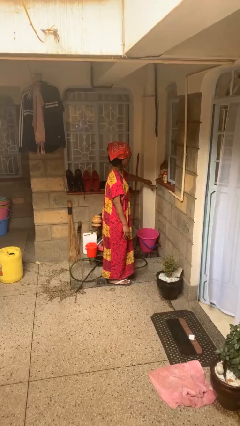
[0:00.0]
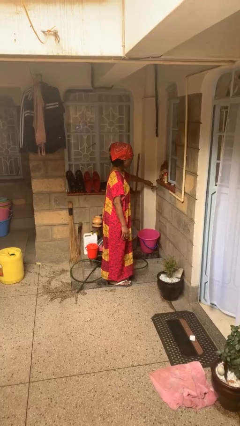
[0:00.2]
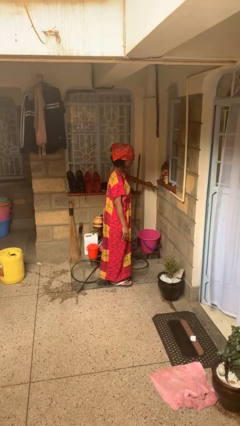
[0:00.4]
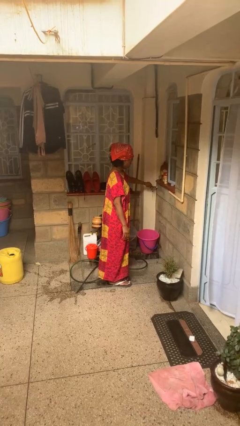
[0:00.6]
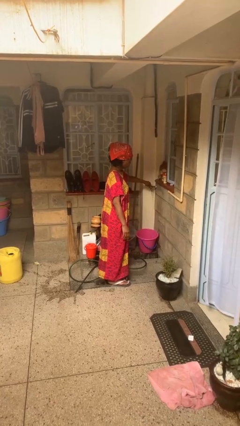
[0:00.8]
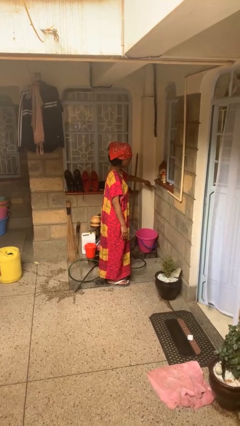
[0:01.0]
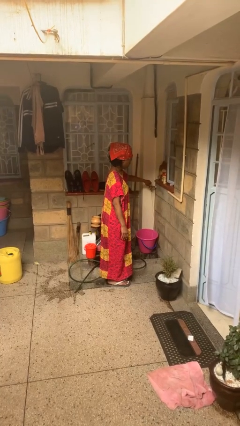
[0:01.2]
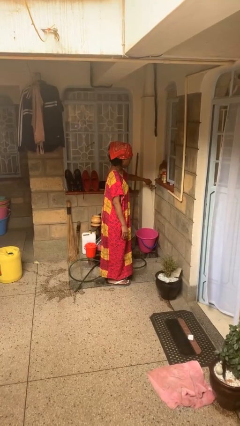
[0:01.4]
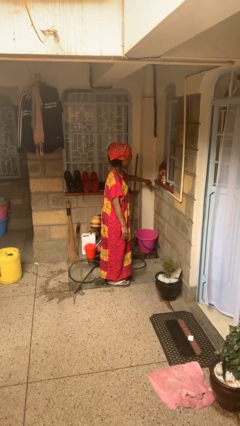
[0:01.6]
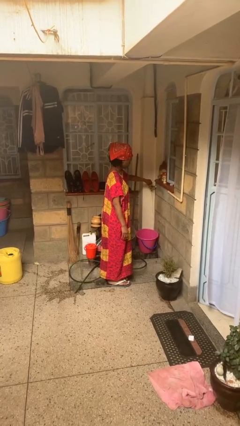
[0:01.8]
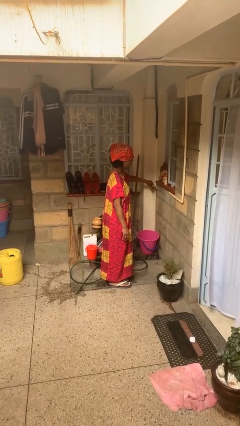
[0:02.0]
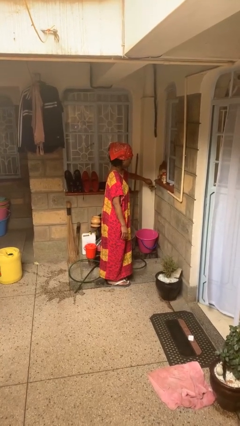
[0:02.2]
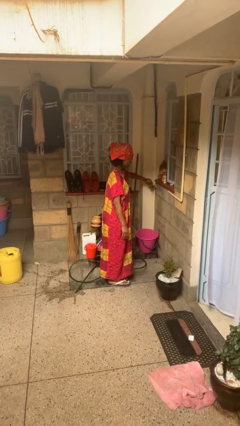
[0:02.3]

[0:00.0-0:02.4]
person turns on faucet

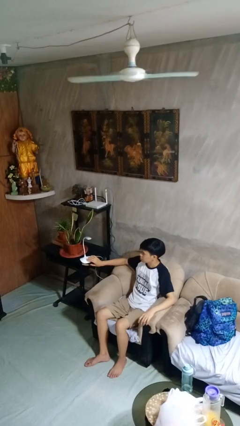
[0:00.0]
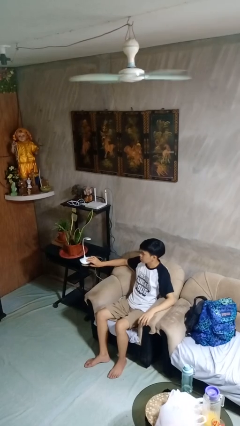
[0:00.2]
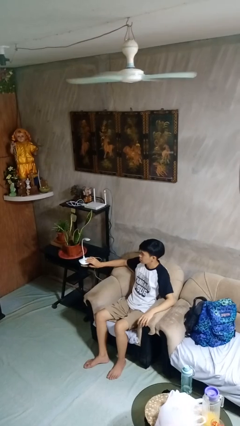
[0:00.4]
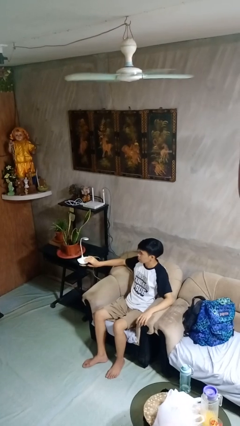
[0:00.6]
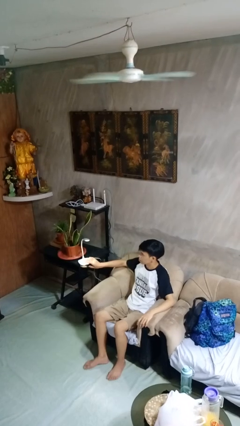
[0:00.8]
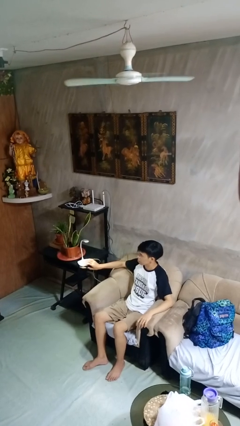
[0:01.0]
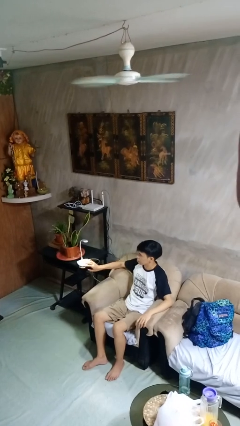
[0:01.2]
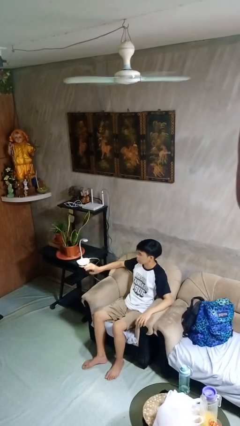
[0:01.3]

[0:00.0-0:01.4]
person turns on lamp

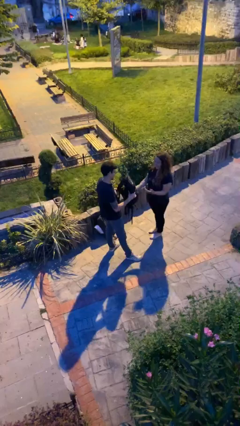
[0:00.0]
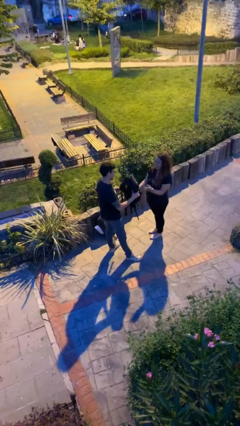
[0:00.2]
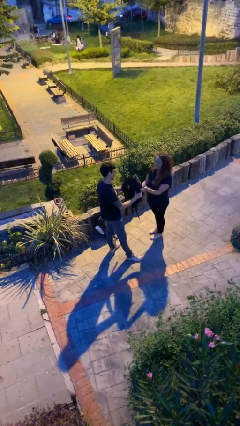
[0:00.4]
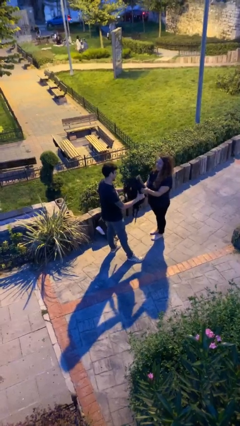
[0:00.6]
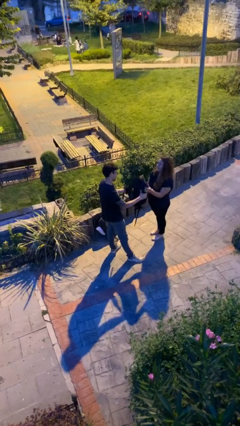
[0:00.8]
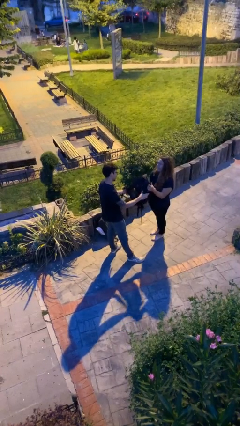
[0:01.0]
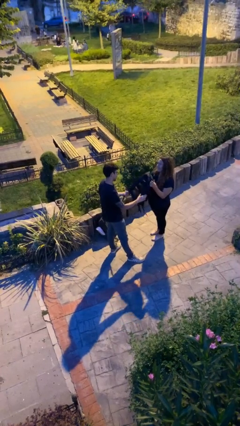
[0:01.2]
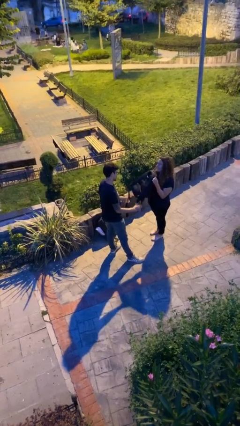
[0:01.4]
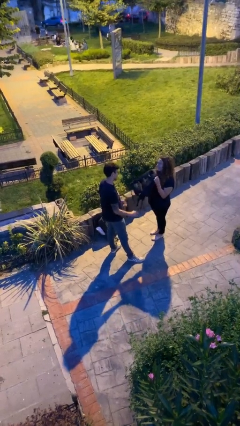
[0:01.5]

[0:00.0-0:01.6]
person transfers object to person

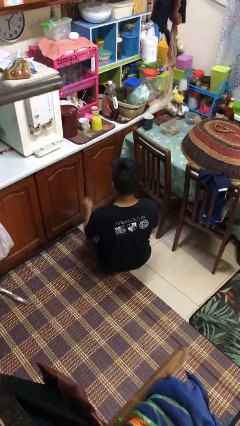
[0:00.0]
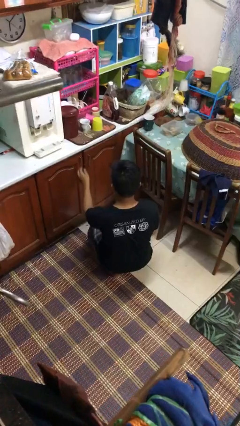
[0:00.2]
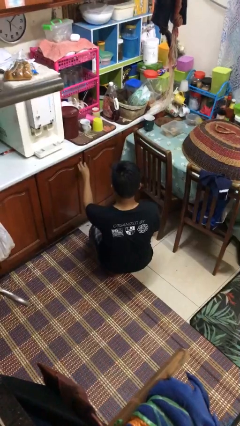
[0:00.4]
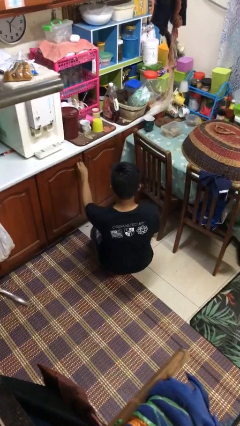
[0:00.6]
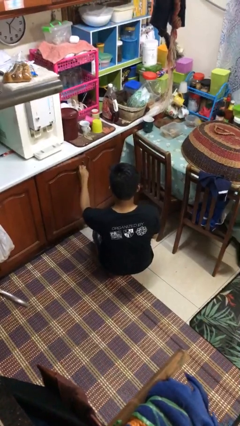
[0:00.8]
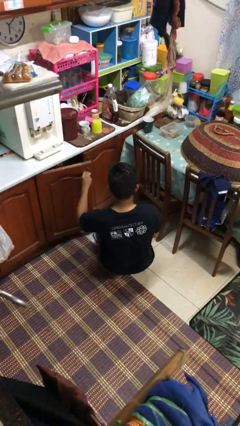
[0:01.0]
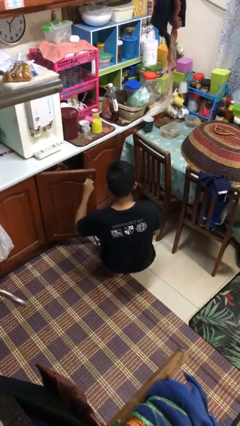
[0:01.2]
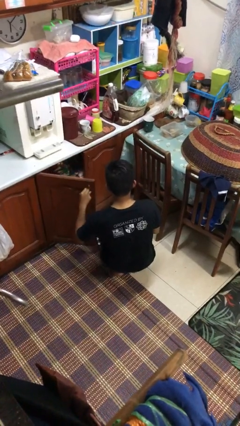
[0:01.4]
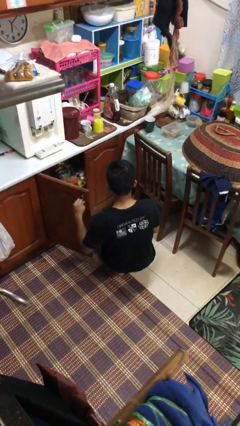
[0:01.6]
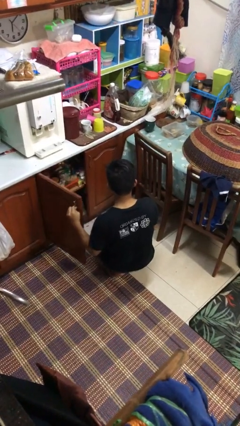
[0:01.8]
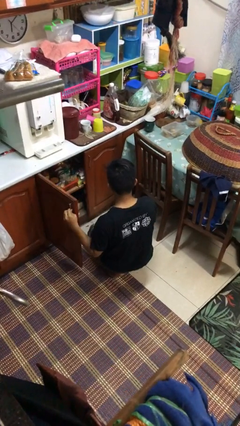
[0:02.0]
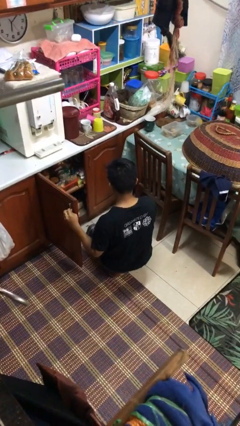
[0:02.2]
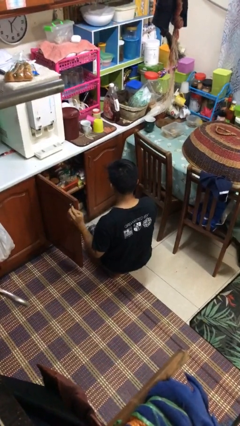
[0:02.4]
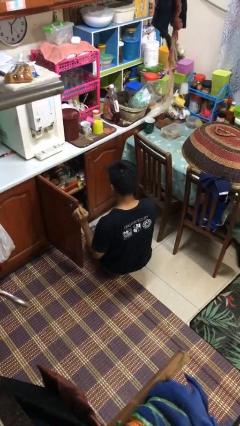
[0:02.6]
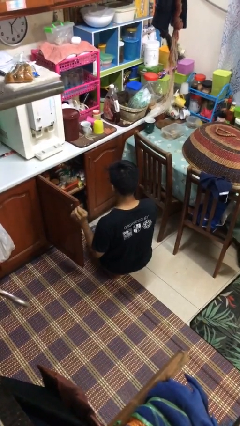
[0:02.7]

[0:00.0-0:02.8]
person opens kitchen drawer

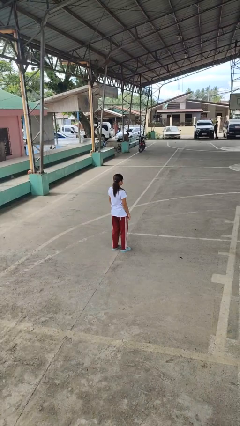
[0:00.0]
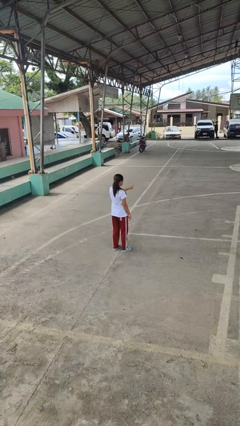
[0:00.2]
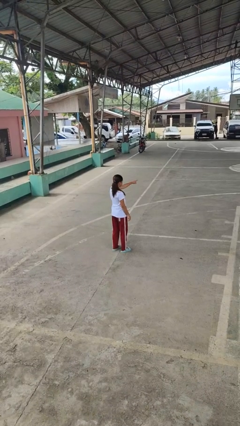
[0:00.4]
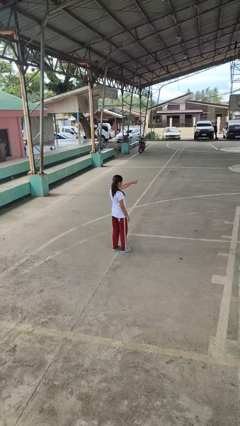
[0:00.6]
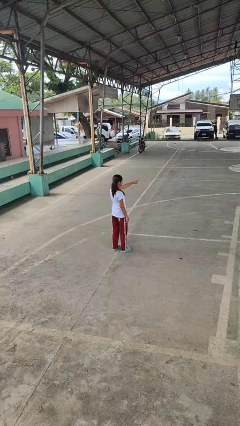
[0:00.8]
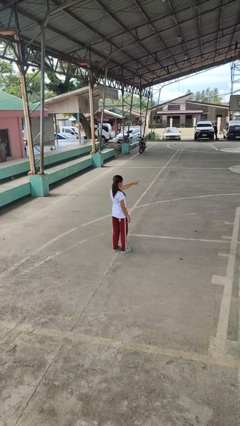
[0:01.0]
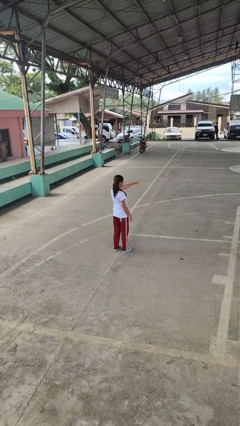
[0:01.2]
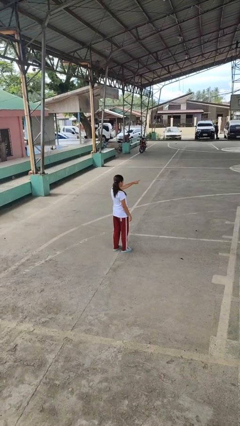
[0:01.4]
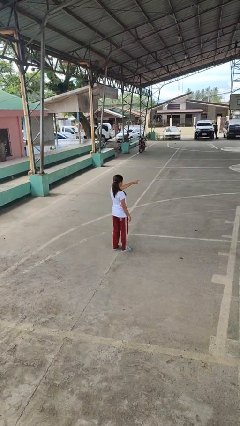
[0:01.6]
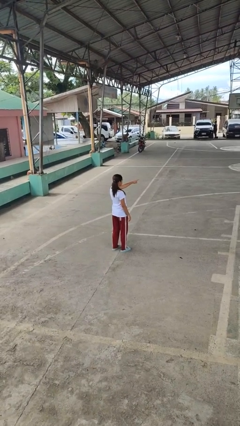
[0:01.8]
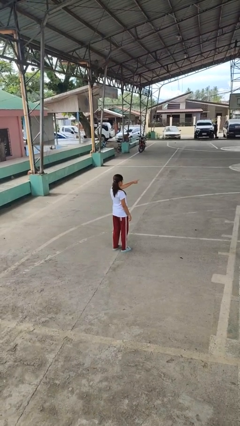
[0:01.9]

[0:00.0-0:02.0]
person points at person

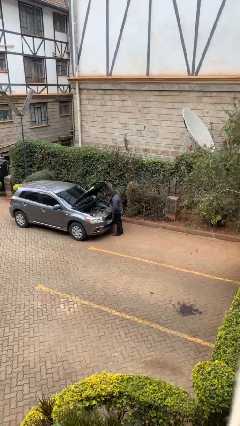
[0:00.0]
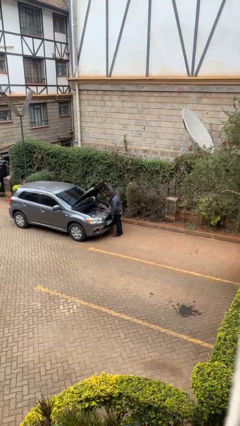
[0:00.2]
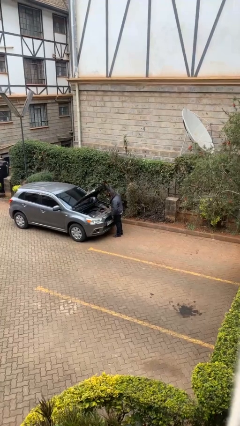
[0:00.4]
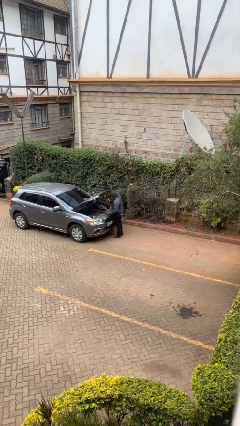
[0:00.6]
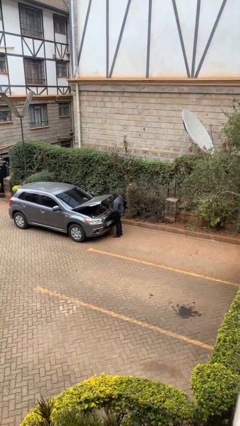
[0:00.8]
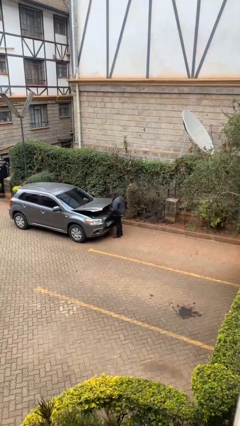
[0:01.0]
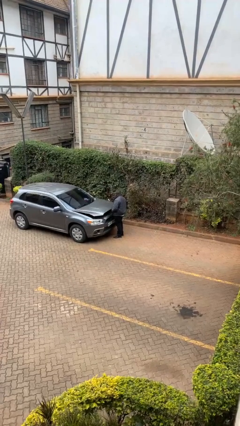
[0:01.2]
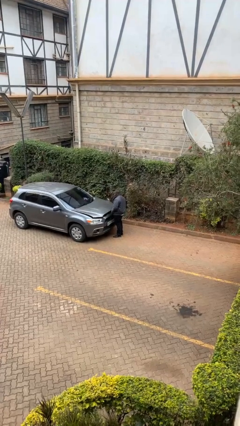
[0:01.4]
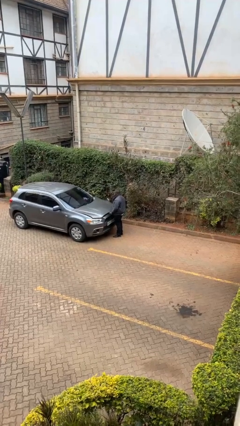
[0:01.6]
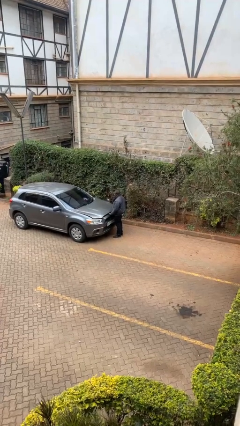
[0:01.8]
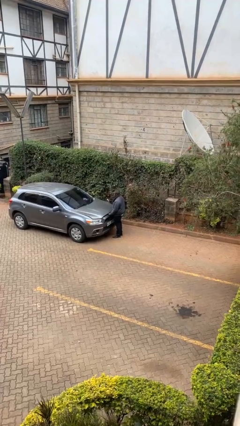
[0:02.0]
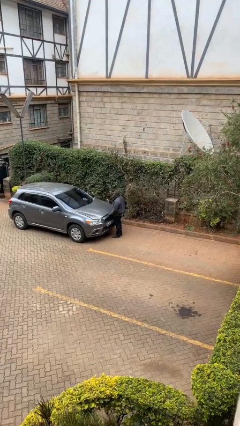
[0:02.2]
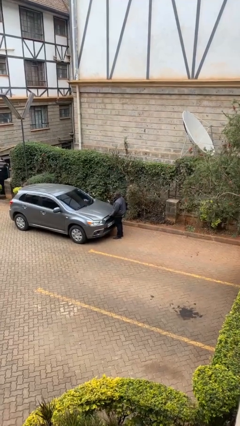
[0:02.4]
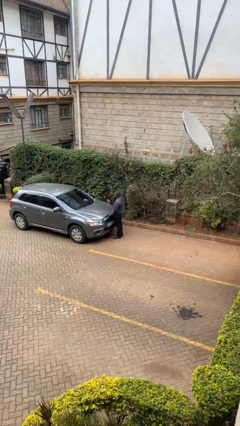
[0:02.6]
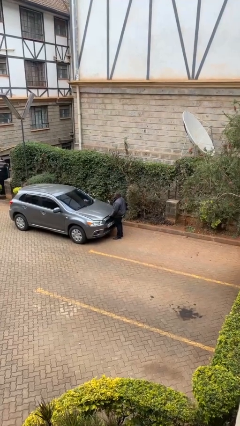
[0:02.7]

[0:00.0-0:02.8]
person closes car hood

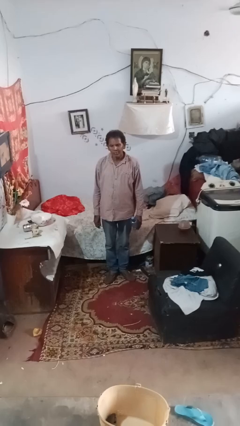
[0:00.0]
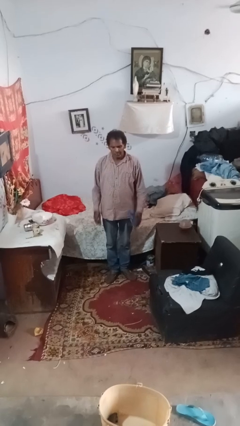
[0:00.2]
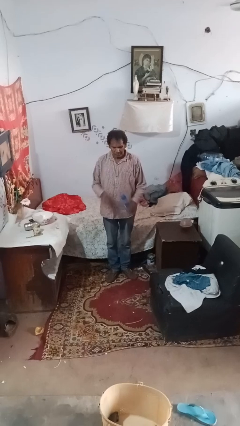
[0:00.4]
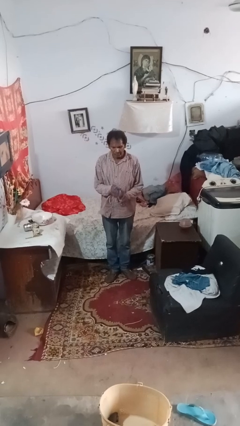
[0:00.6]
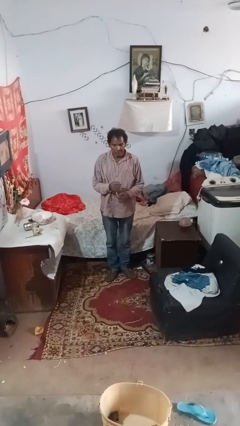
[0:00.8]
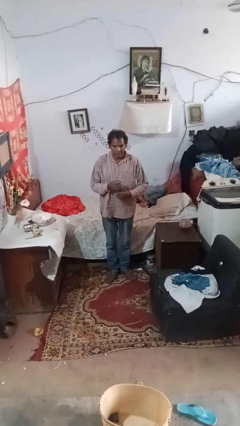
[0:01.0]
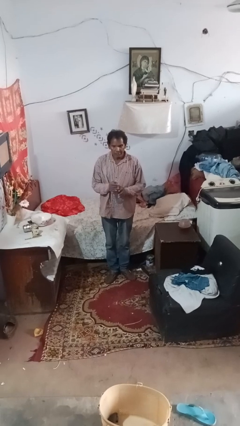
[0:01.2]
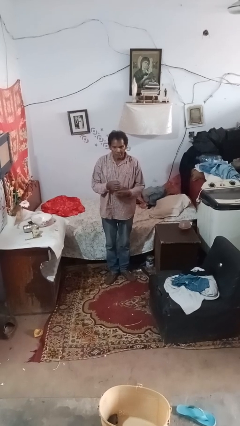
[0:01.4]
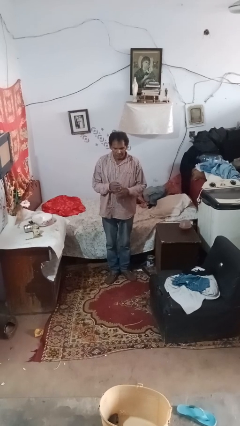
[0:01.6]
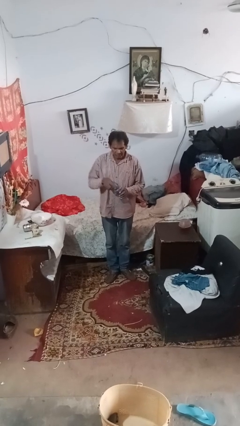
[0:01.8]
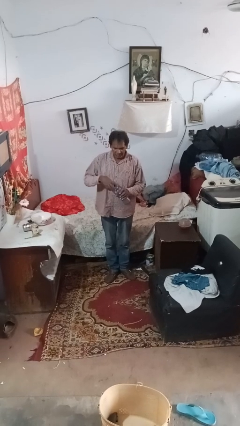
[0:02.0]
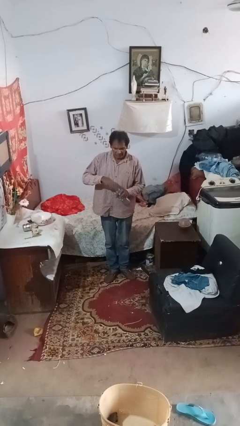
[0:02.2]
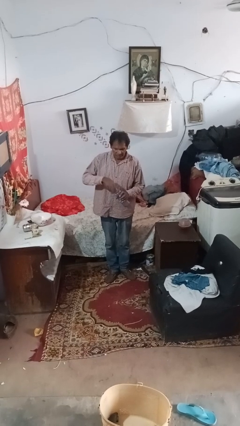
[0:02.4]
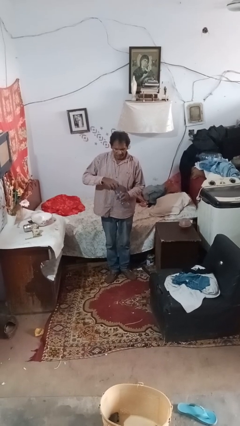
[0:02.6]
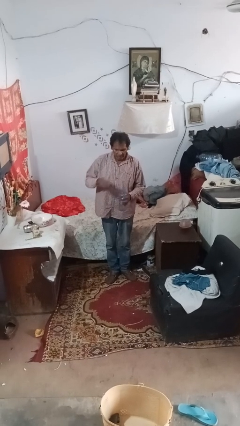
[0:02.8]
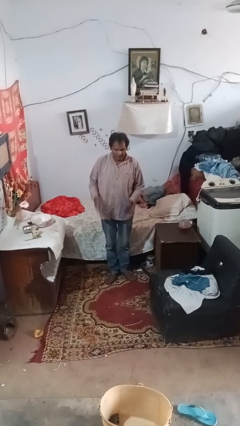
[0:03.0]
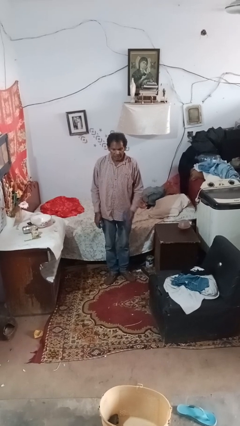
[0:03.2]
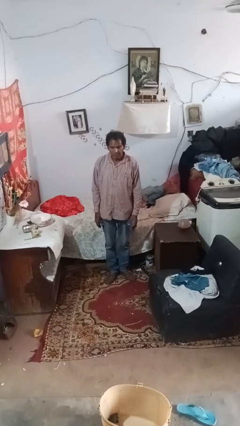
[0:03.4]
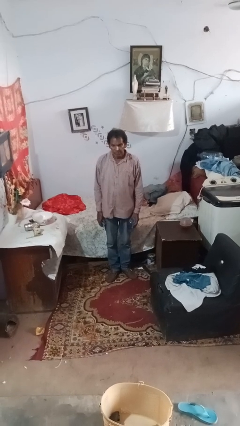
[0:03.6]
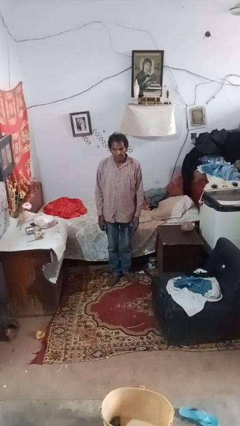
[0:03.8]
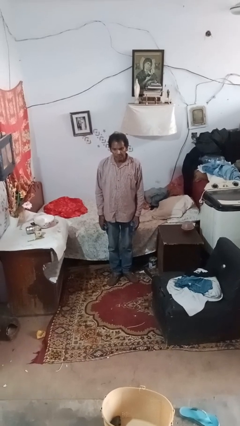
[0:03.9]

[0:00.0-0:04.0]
person unscrews lid from bottle
